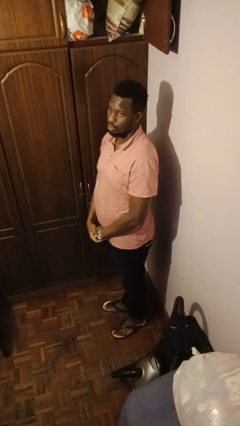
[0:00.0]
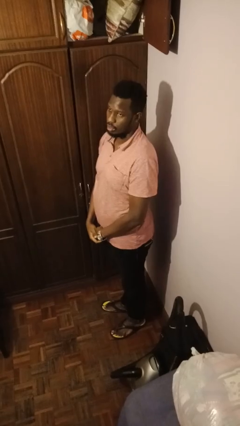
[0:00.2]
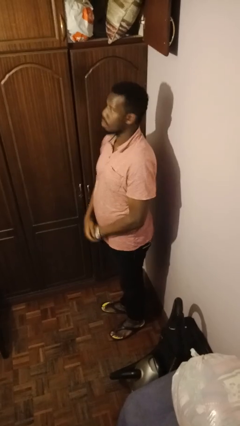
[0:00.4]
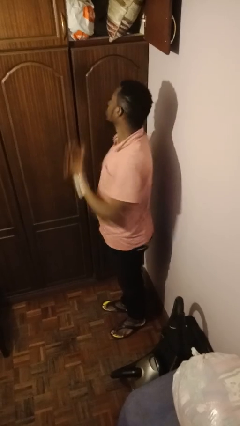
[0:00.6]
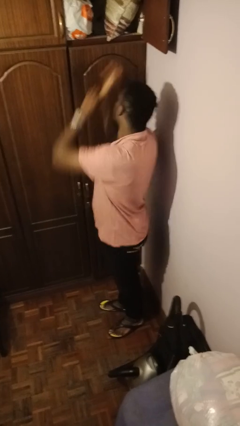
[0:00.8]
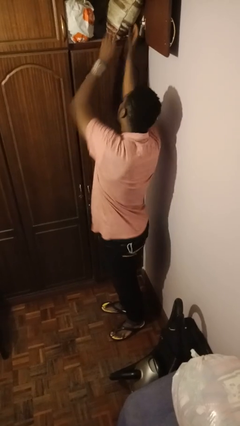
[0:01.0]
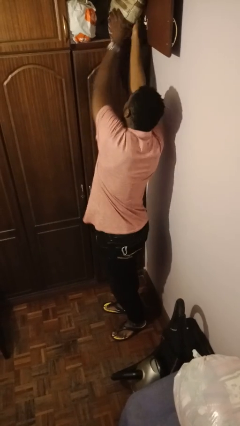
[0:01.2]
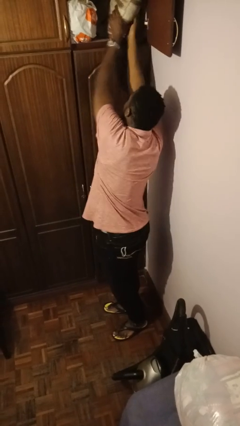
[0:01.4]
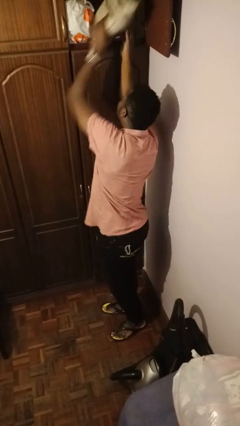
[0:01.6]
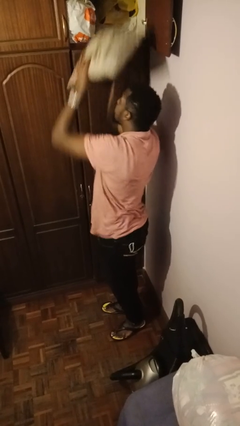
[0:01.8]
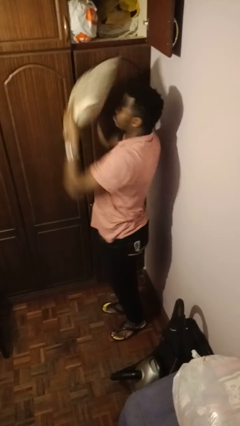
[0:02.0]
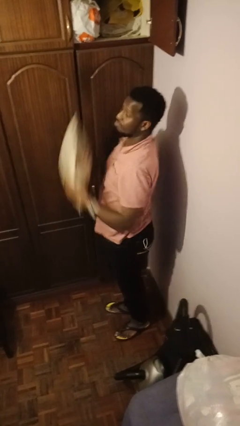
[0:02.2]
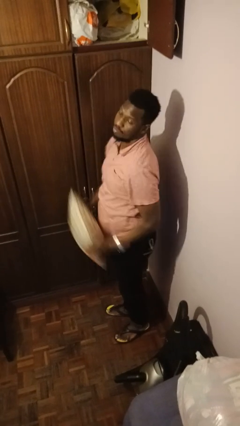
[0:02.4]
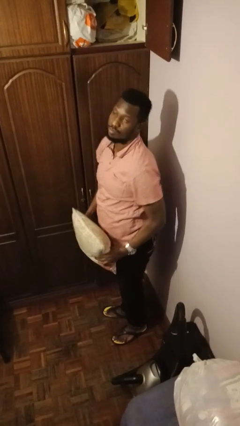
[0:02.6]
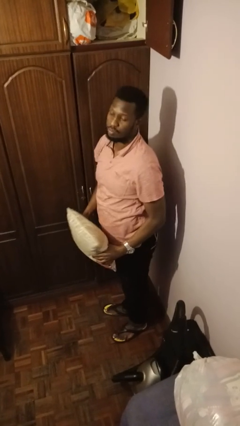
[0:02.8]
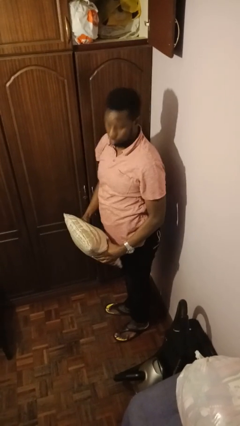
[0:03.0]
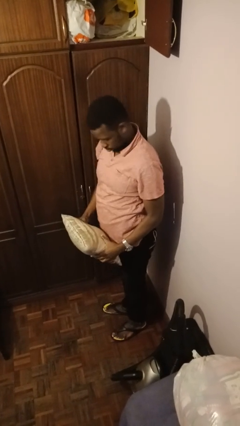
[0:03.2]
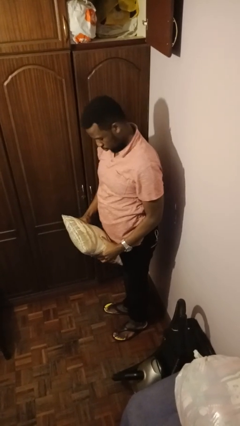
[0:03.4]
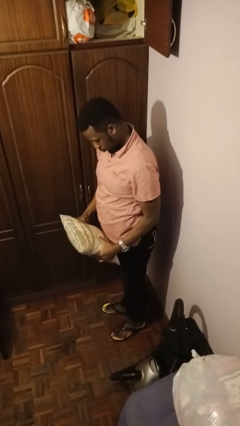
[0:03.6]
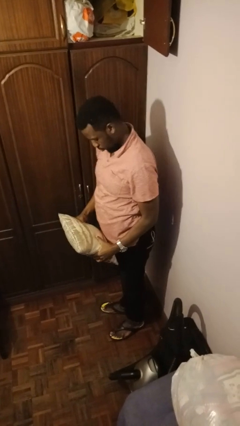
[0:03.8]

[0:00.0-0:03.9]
person picks up object from shelf

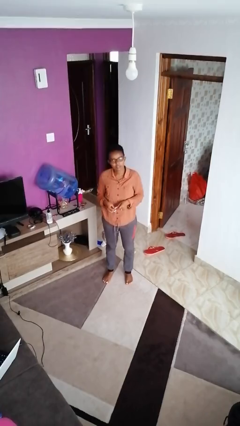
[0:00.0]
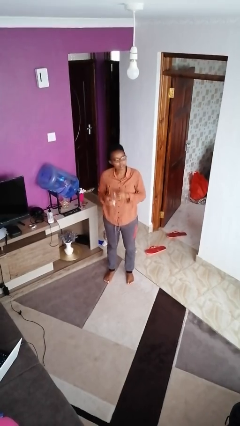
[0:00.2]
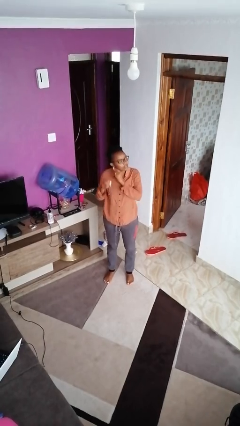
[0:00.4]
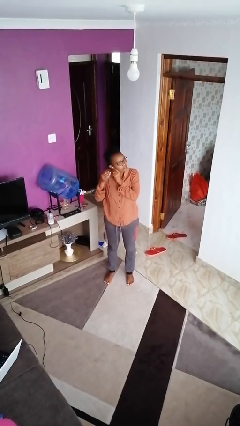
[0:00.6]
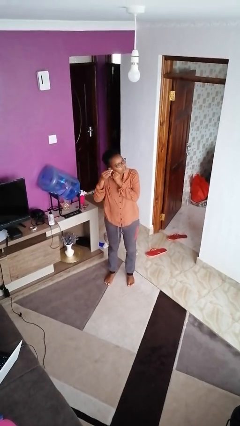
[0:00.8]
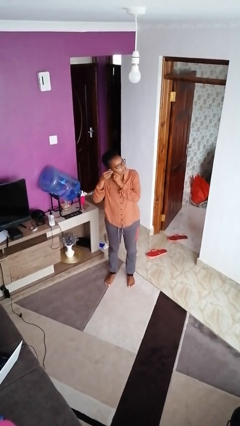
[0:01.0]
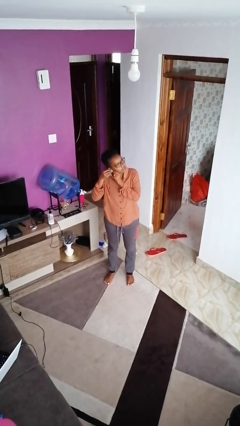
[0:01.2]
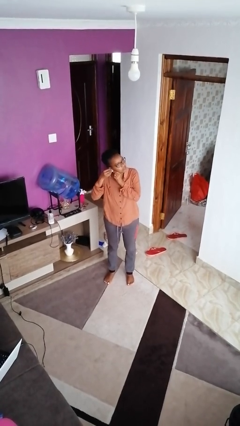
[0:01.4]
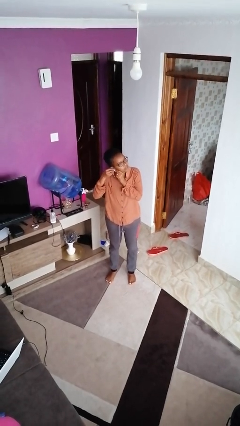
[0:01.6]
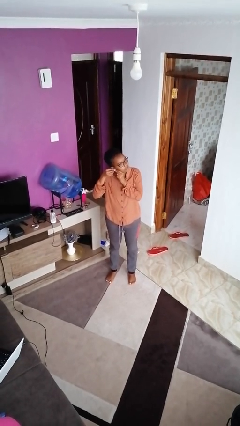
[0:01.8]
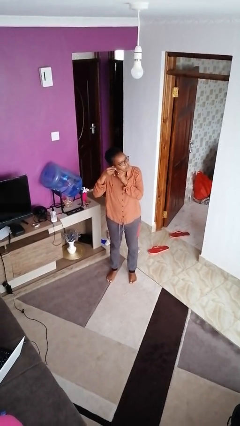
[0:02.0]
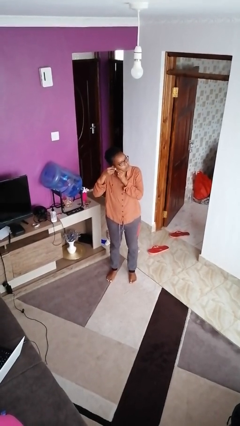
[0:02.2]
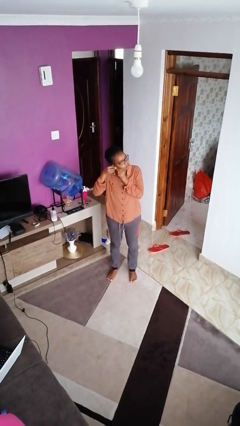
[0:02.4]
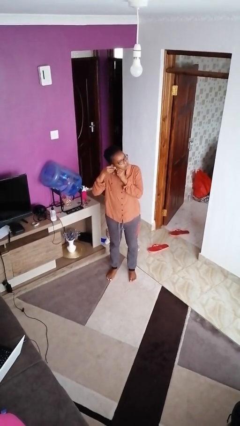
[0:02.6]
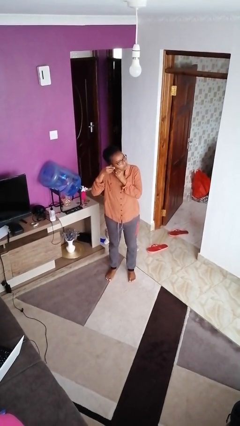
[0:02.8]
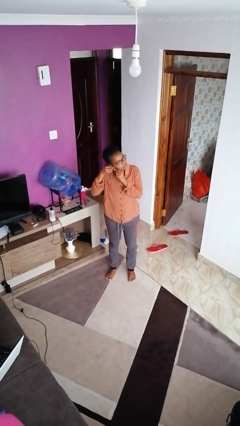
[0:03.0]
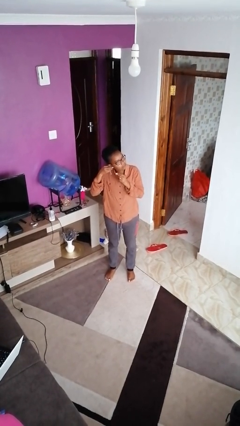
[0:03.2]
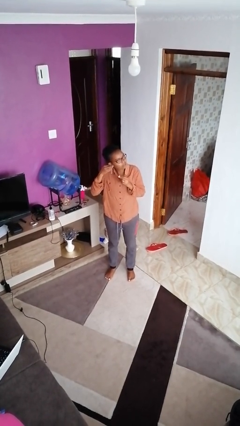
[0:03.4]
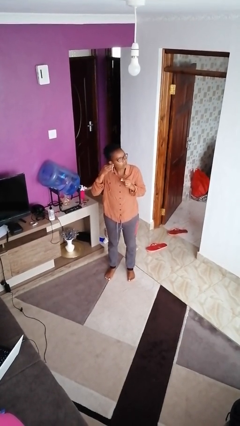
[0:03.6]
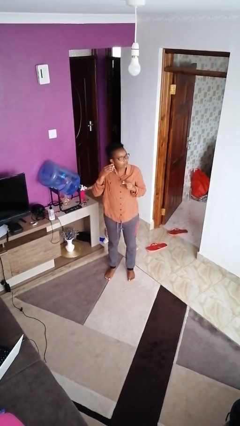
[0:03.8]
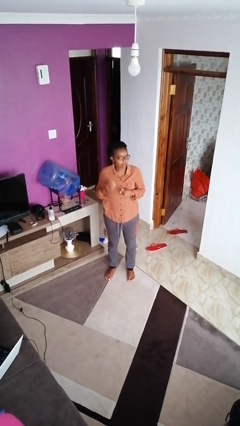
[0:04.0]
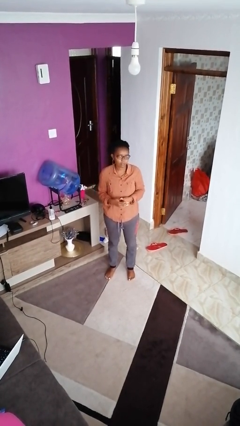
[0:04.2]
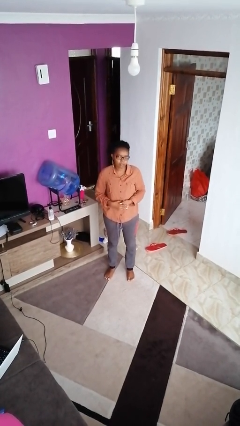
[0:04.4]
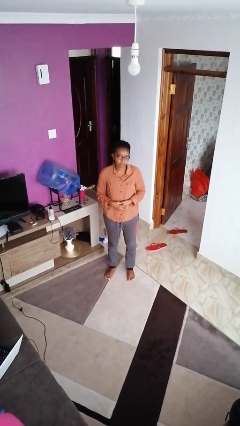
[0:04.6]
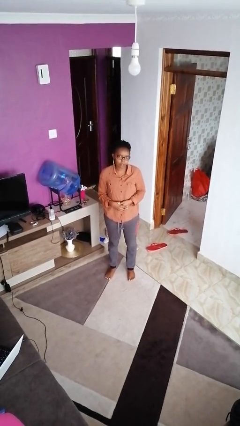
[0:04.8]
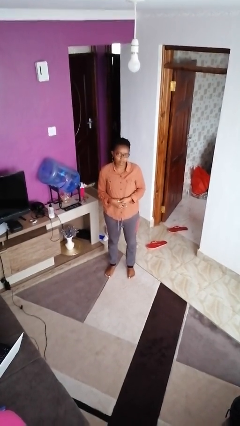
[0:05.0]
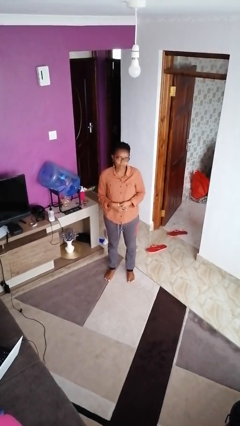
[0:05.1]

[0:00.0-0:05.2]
person puts on earrings

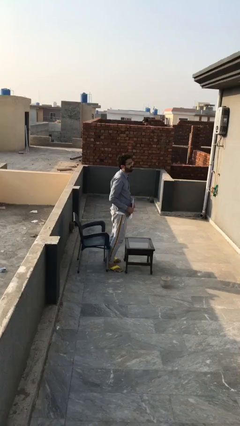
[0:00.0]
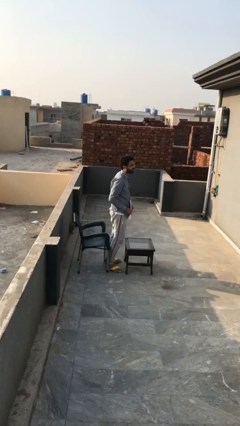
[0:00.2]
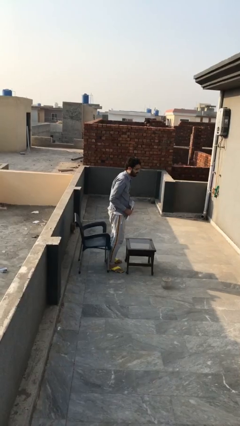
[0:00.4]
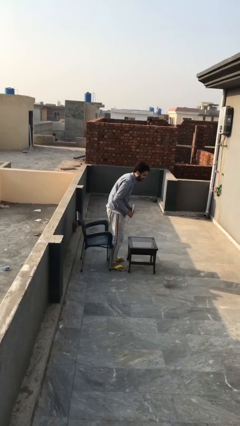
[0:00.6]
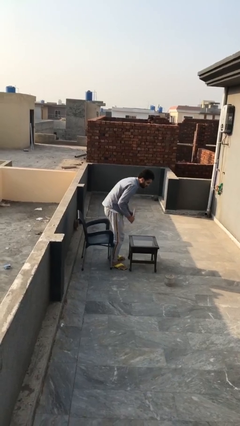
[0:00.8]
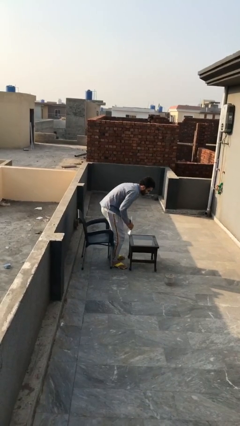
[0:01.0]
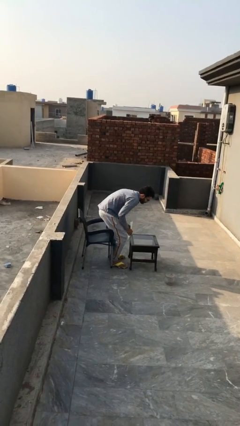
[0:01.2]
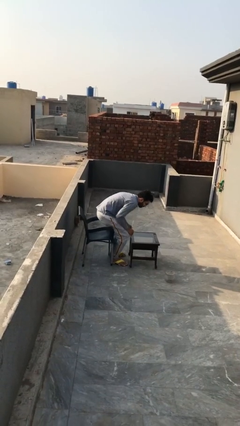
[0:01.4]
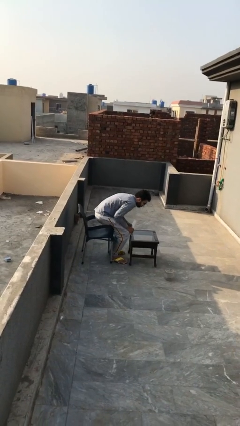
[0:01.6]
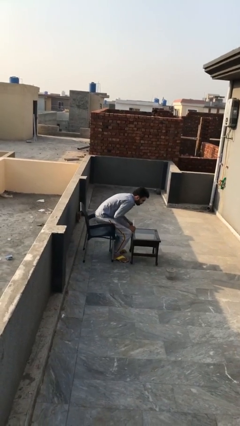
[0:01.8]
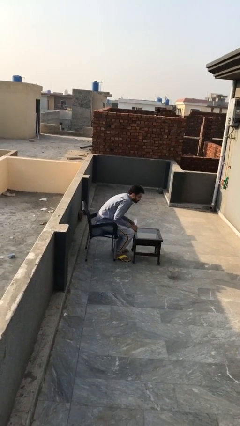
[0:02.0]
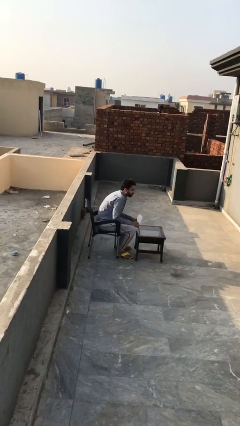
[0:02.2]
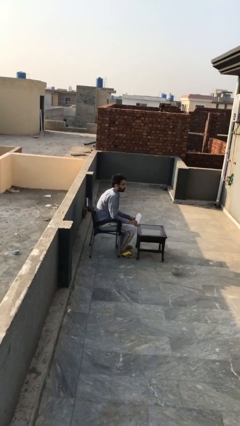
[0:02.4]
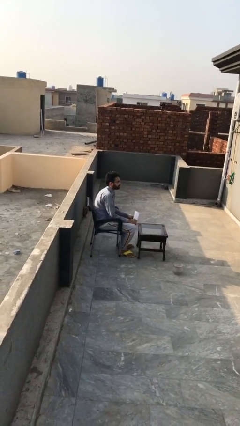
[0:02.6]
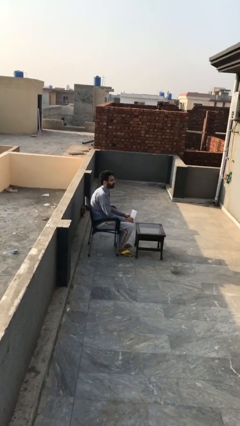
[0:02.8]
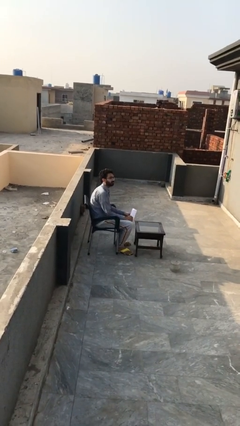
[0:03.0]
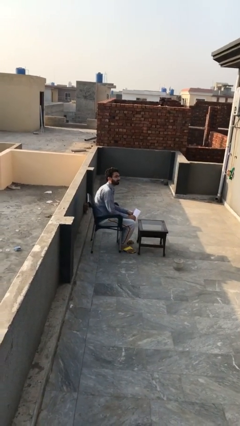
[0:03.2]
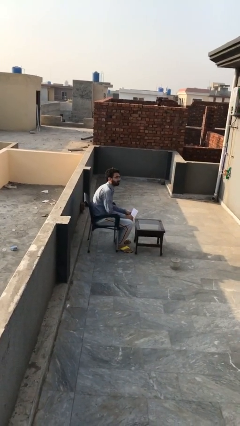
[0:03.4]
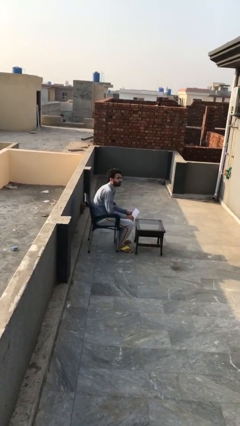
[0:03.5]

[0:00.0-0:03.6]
person sits down

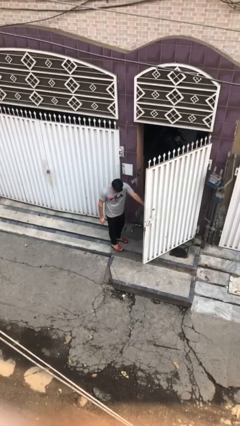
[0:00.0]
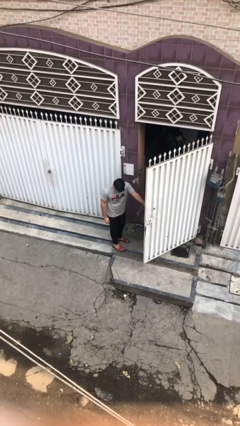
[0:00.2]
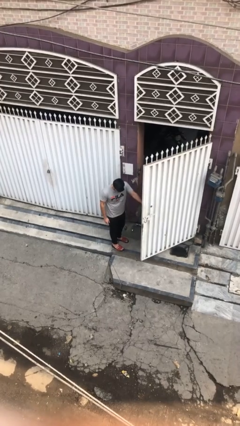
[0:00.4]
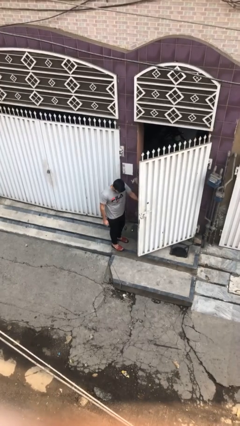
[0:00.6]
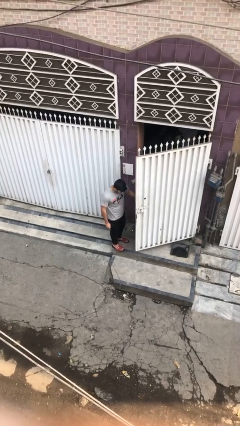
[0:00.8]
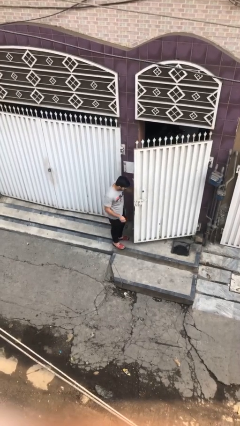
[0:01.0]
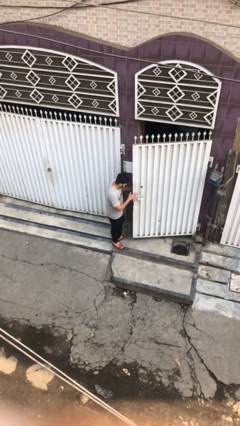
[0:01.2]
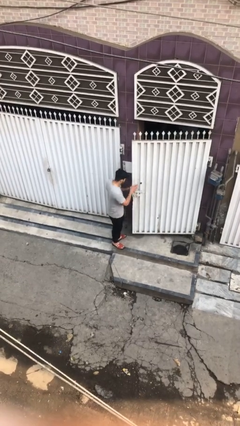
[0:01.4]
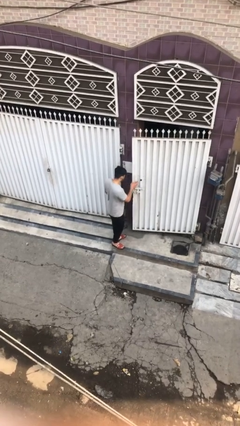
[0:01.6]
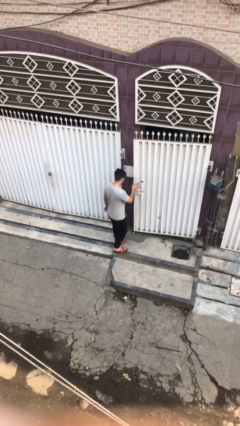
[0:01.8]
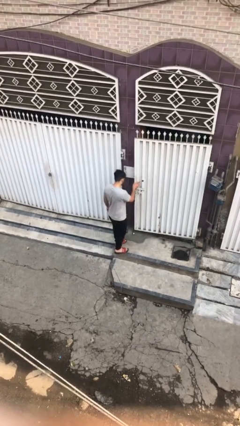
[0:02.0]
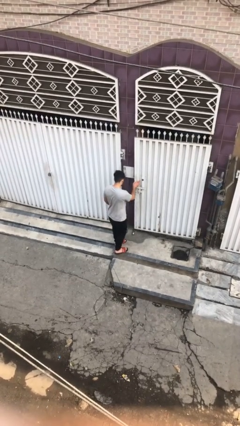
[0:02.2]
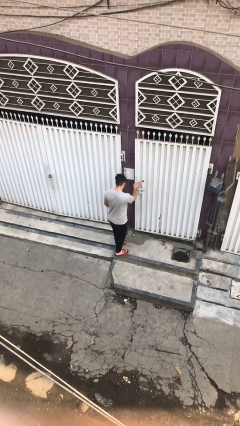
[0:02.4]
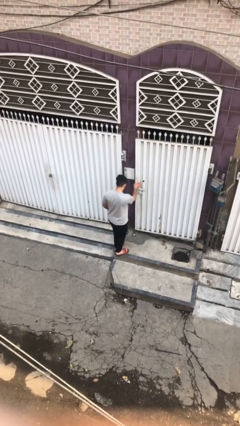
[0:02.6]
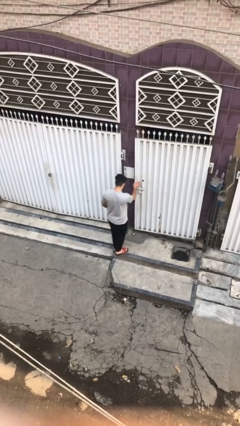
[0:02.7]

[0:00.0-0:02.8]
person closes facility door

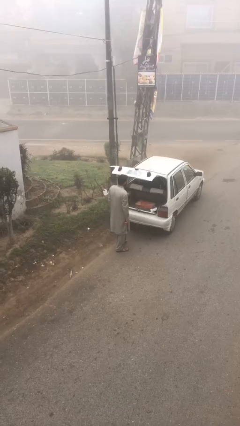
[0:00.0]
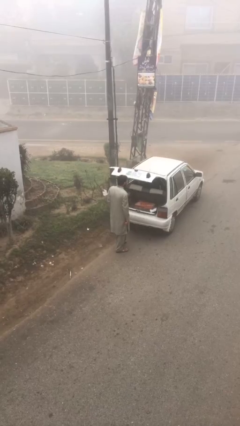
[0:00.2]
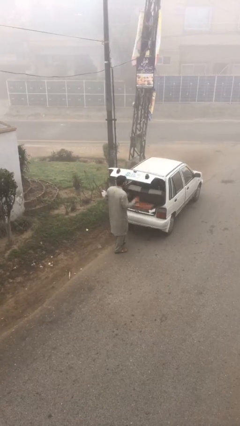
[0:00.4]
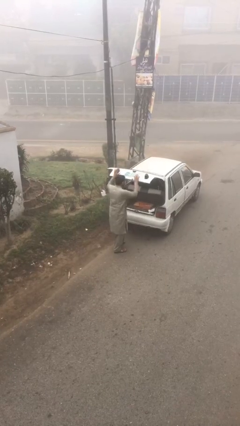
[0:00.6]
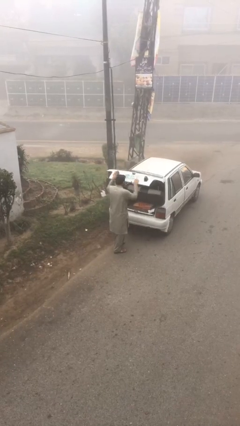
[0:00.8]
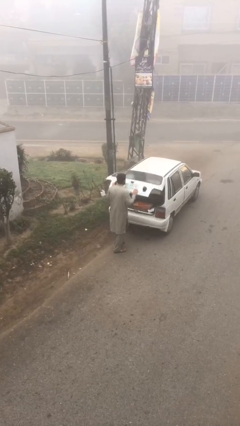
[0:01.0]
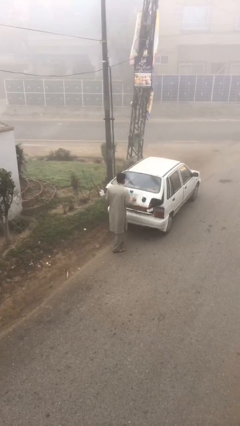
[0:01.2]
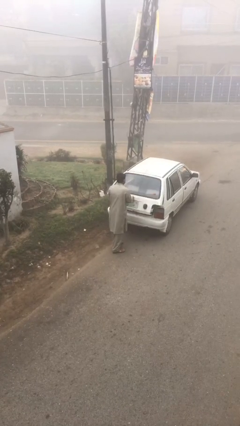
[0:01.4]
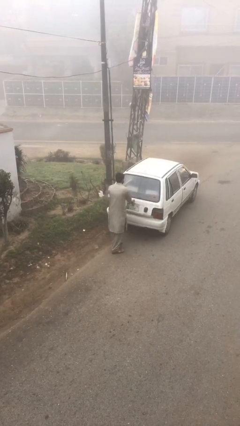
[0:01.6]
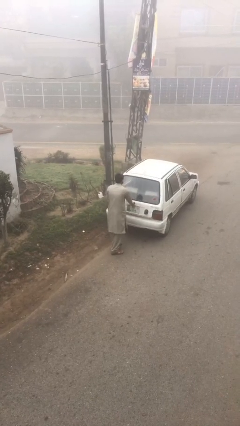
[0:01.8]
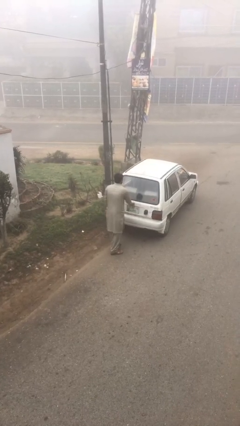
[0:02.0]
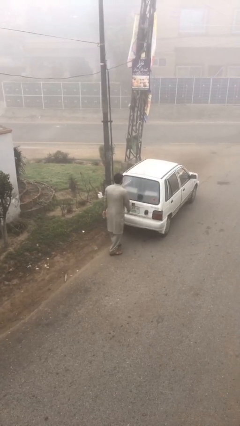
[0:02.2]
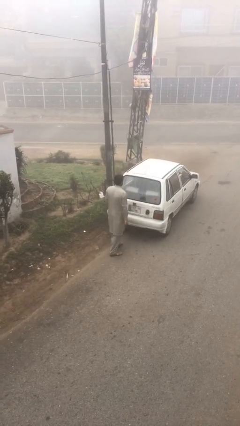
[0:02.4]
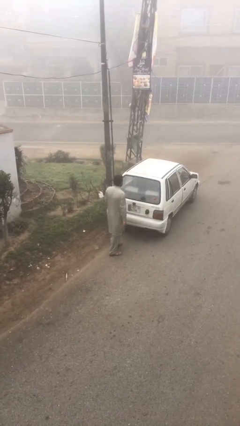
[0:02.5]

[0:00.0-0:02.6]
person closes car trunk
